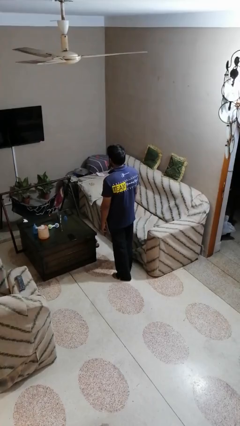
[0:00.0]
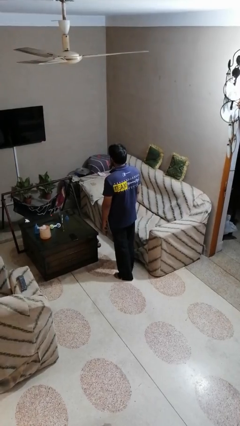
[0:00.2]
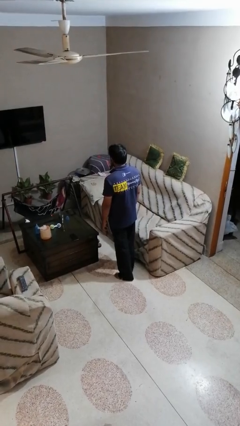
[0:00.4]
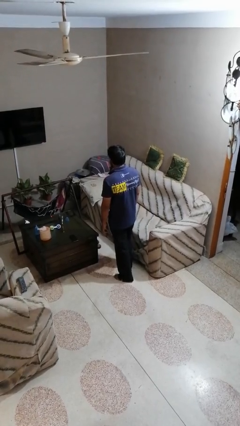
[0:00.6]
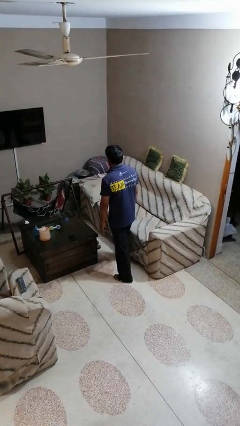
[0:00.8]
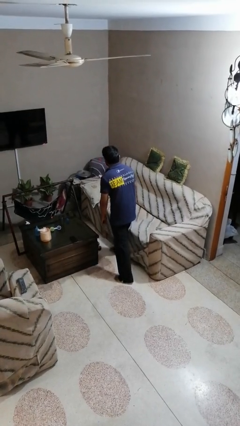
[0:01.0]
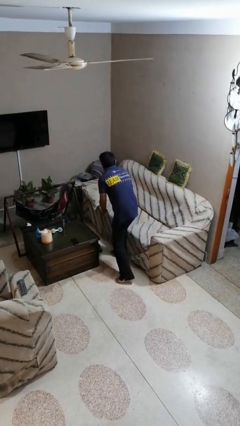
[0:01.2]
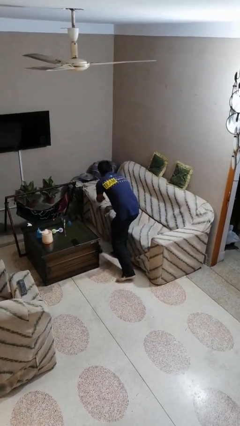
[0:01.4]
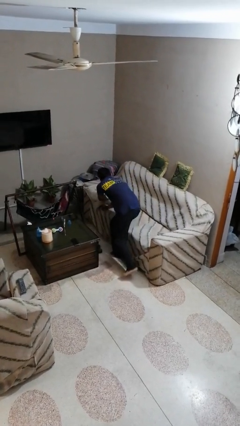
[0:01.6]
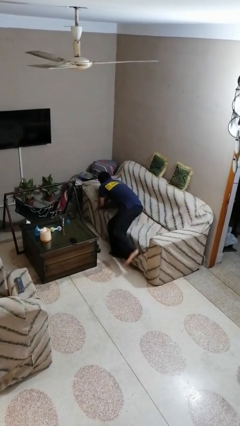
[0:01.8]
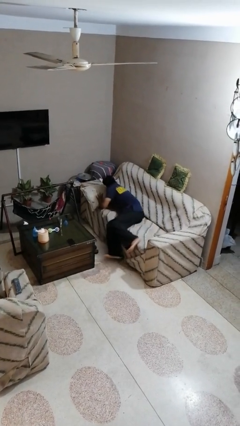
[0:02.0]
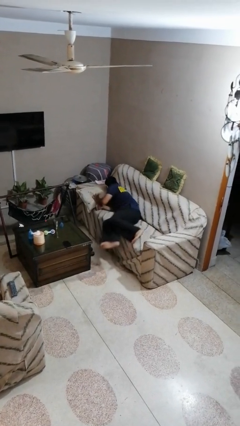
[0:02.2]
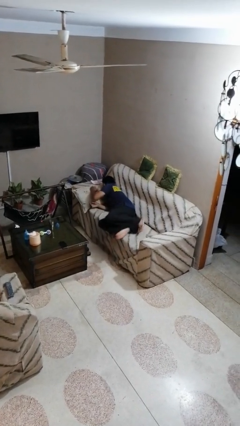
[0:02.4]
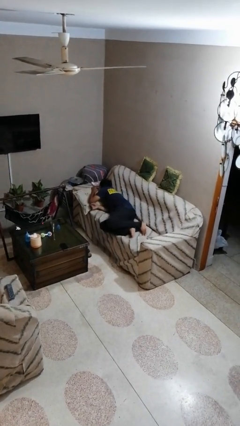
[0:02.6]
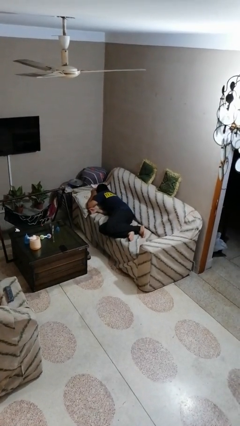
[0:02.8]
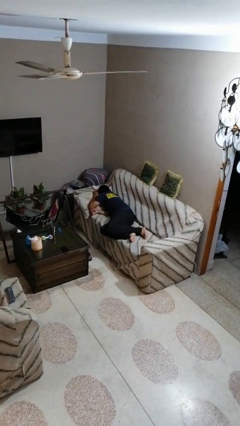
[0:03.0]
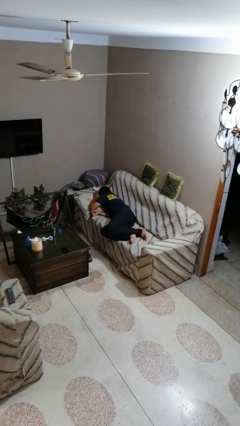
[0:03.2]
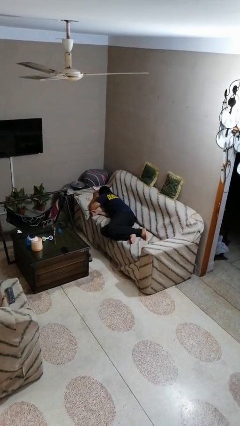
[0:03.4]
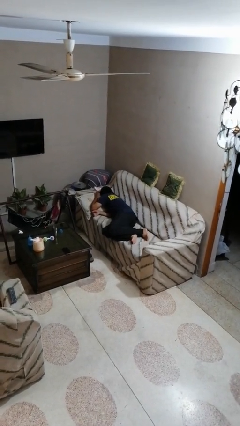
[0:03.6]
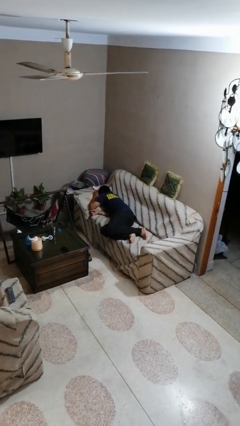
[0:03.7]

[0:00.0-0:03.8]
person lies down on couch

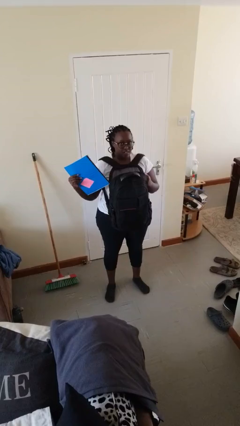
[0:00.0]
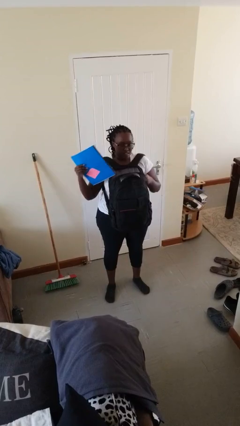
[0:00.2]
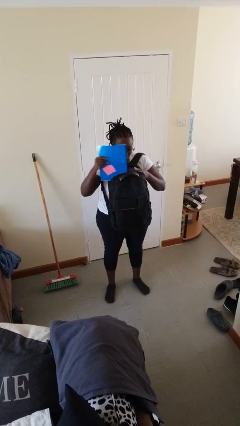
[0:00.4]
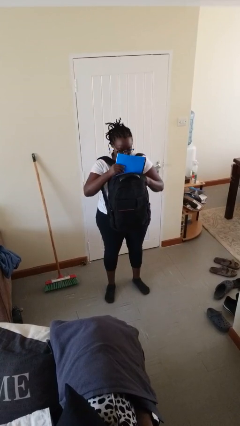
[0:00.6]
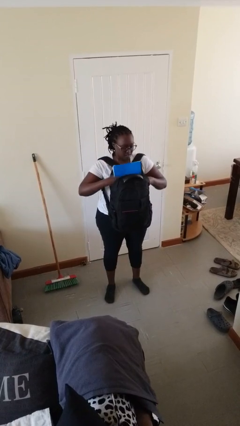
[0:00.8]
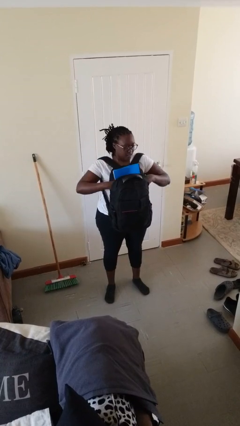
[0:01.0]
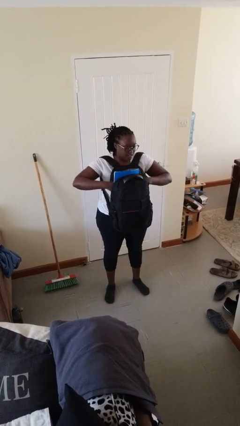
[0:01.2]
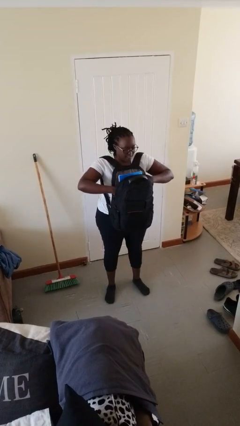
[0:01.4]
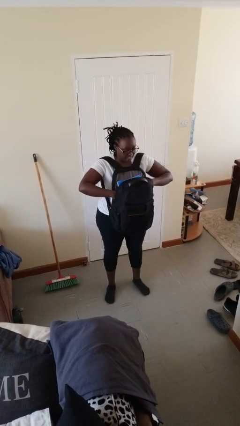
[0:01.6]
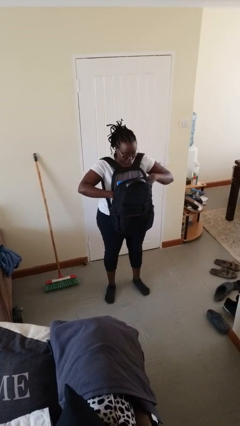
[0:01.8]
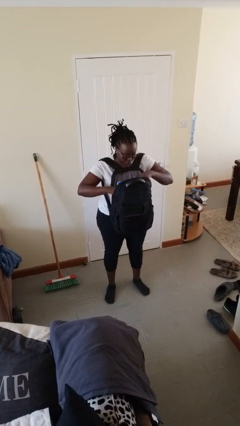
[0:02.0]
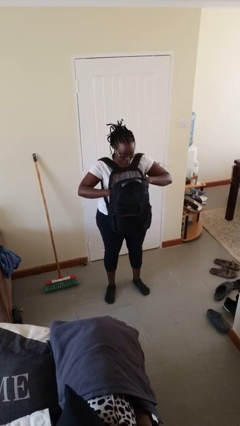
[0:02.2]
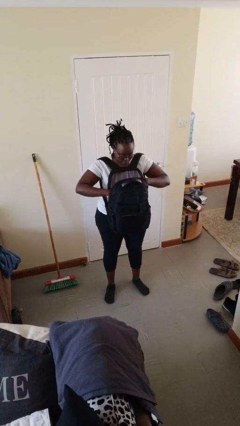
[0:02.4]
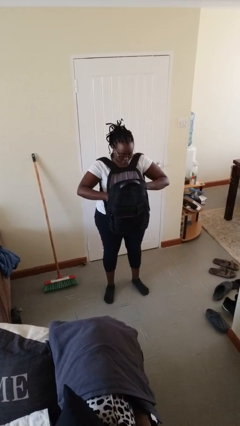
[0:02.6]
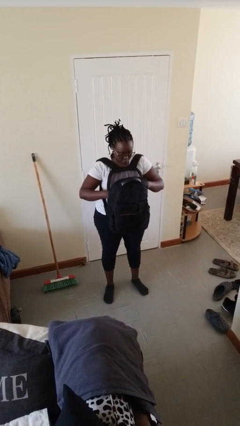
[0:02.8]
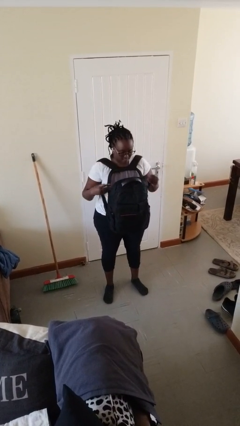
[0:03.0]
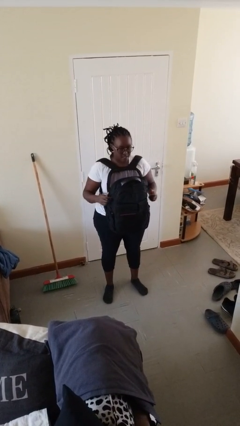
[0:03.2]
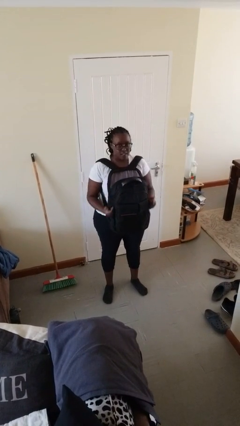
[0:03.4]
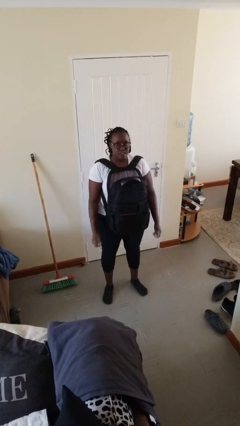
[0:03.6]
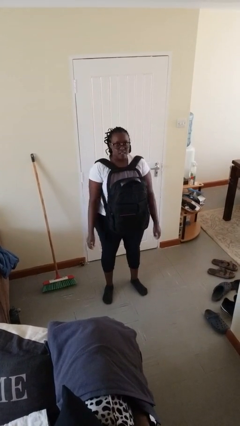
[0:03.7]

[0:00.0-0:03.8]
person puts object into backpack

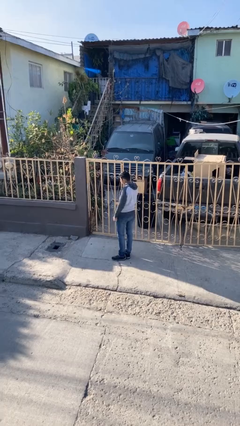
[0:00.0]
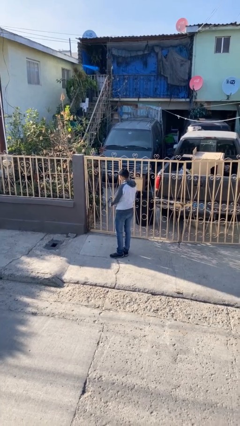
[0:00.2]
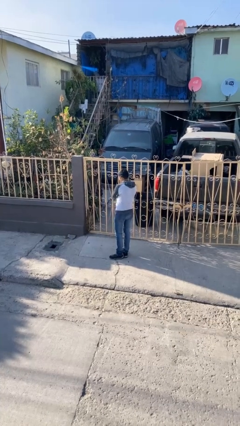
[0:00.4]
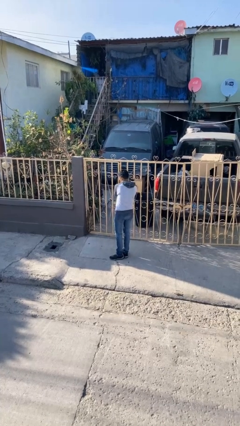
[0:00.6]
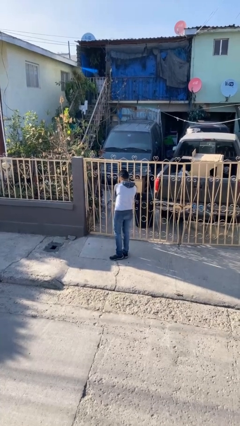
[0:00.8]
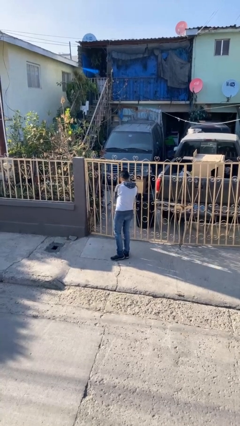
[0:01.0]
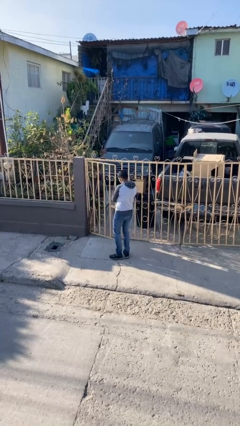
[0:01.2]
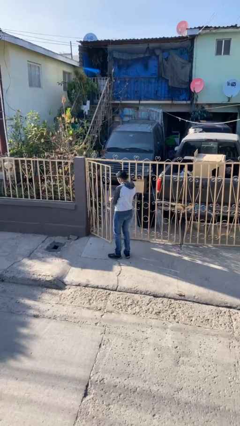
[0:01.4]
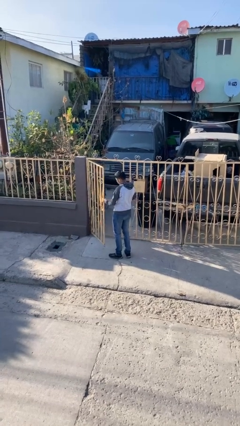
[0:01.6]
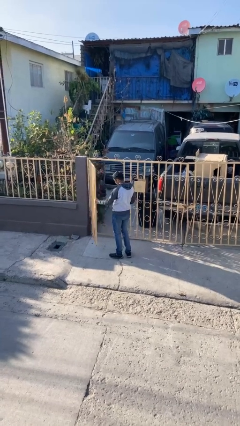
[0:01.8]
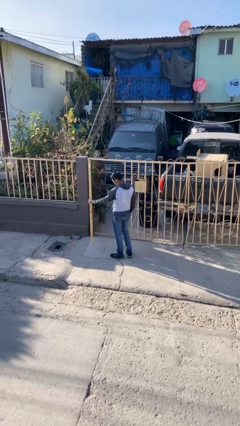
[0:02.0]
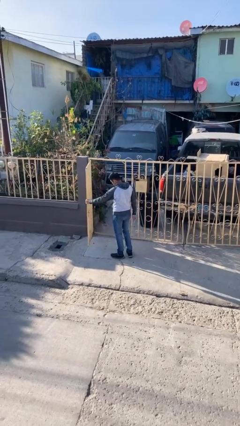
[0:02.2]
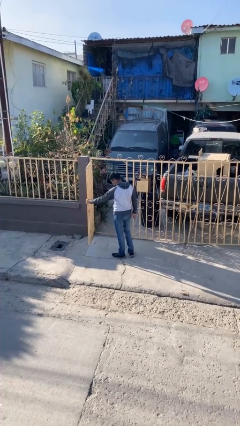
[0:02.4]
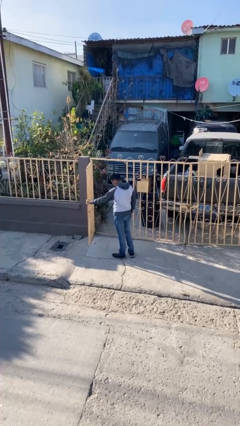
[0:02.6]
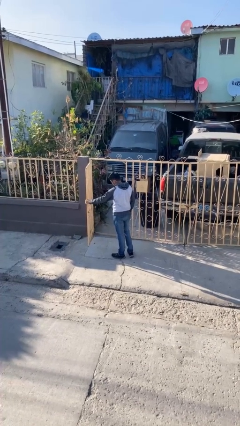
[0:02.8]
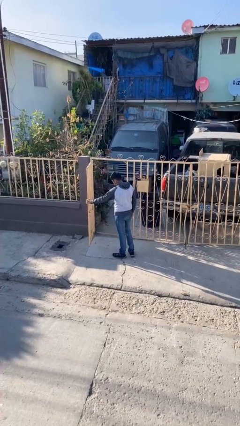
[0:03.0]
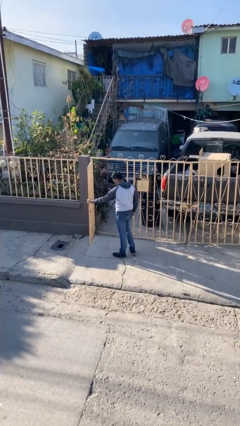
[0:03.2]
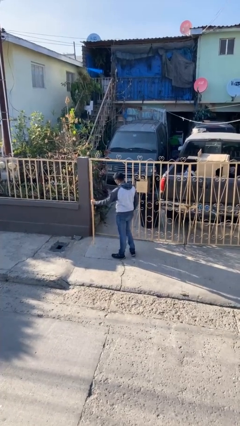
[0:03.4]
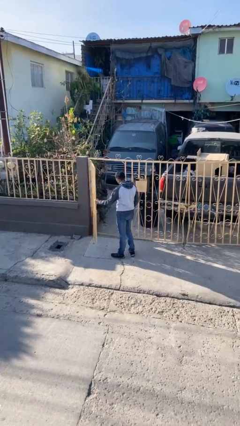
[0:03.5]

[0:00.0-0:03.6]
person opens facility door

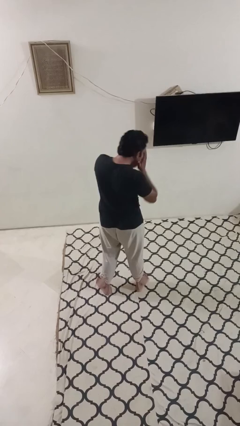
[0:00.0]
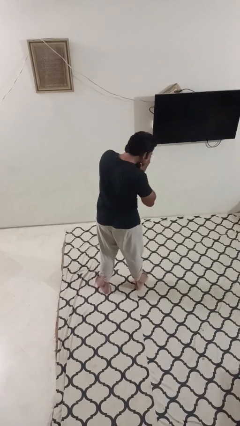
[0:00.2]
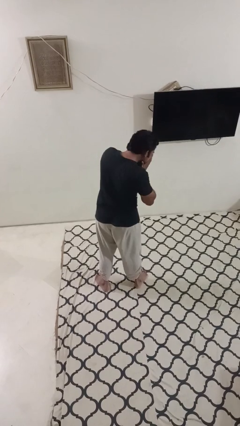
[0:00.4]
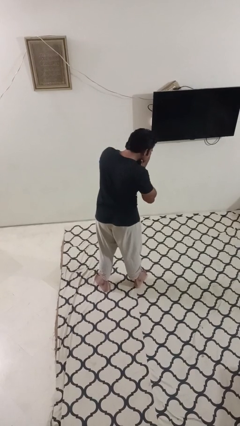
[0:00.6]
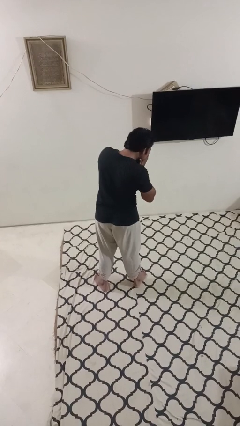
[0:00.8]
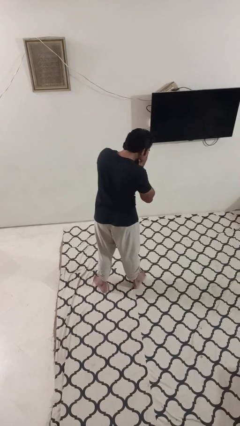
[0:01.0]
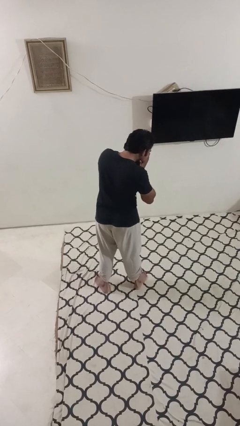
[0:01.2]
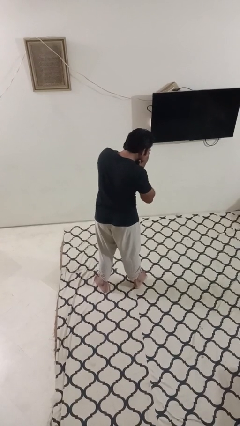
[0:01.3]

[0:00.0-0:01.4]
person sneezes into hand

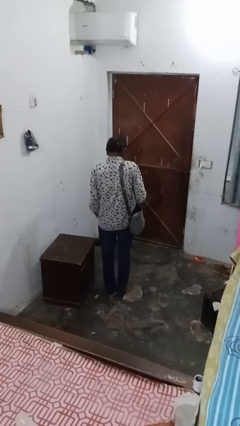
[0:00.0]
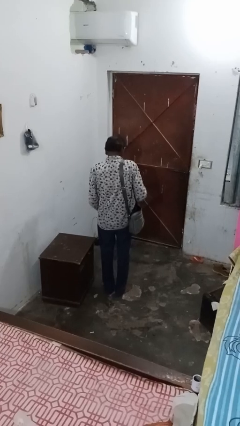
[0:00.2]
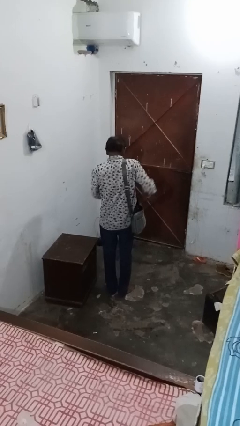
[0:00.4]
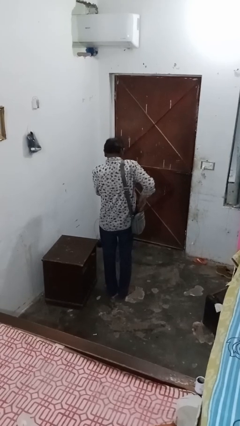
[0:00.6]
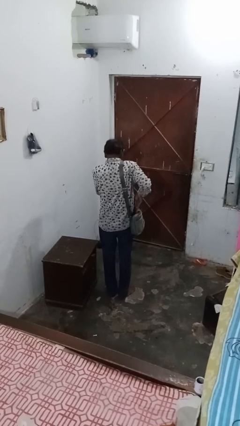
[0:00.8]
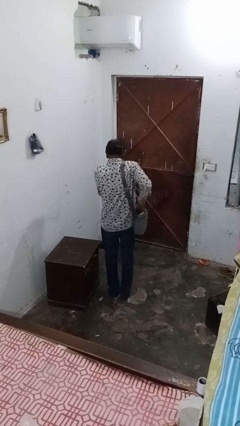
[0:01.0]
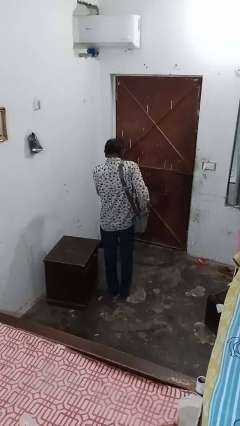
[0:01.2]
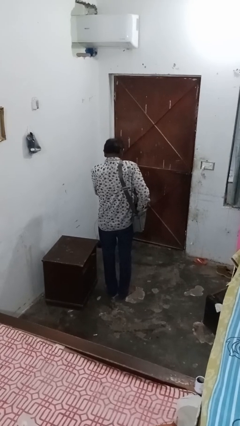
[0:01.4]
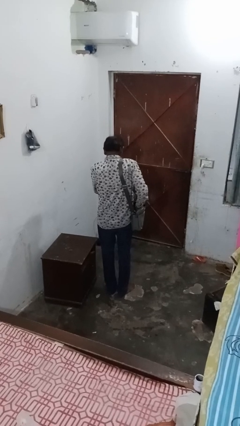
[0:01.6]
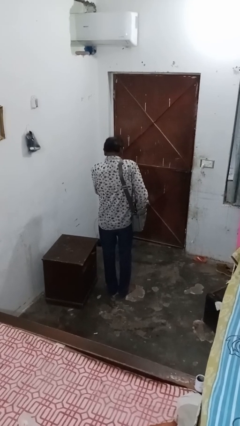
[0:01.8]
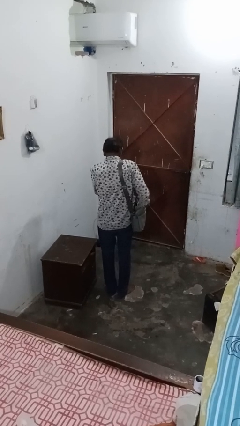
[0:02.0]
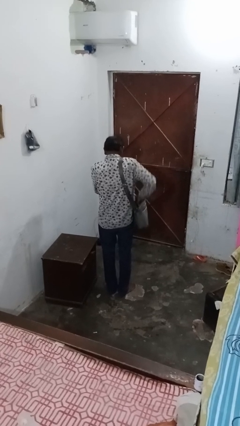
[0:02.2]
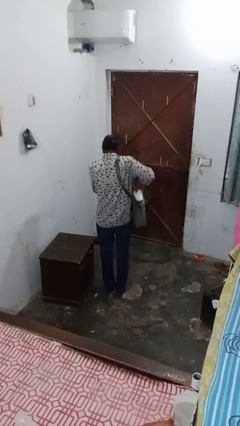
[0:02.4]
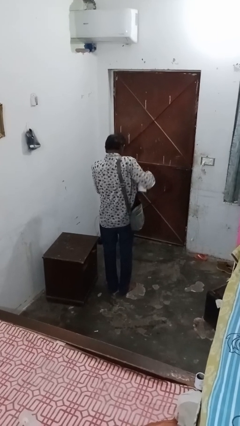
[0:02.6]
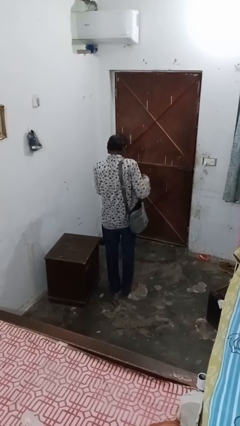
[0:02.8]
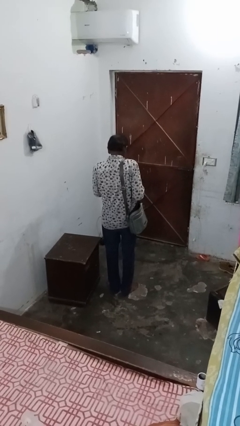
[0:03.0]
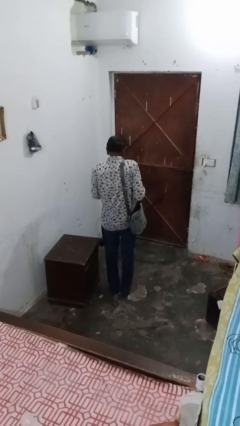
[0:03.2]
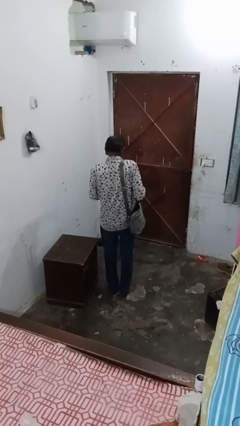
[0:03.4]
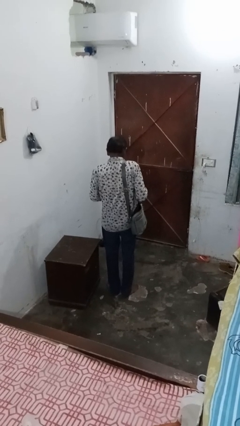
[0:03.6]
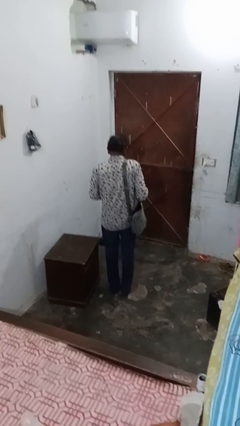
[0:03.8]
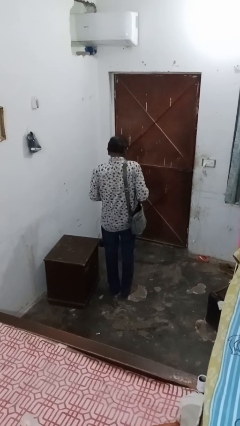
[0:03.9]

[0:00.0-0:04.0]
person takes object from bag

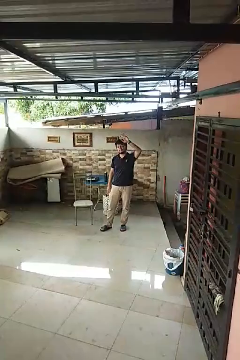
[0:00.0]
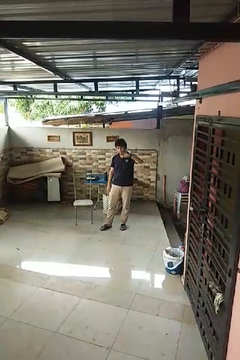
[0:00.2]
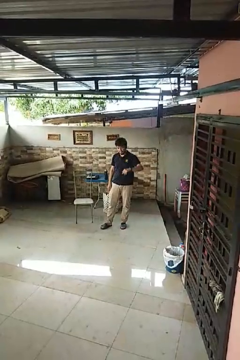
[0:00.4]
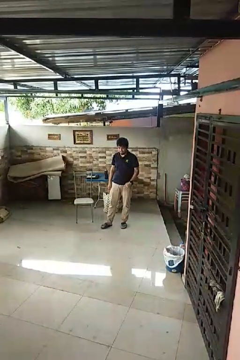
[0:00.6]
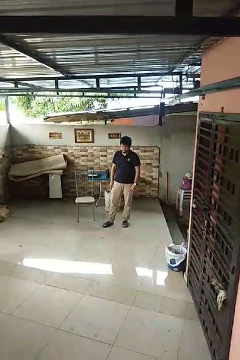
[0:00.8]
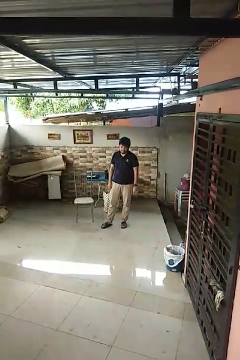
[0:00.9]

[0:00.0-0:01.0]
person gestures swipe down
